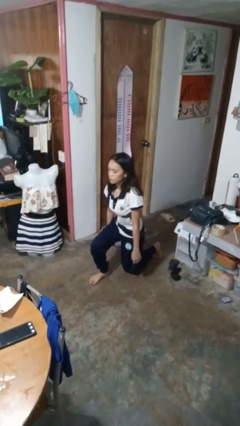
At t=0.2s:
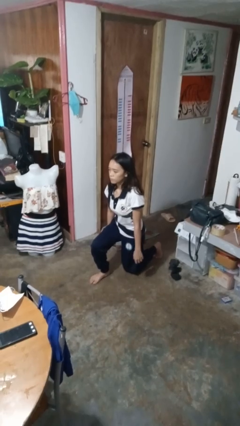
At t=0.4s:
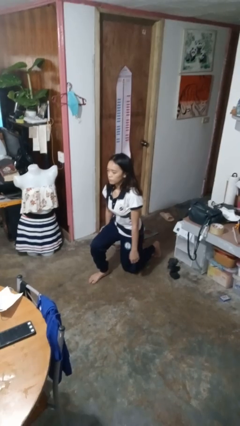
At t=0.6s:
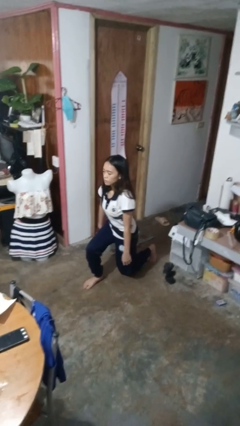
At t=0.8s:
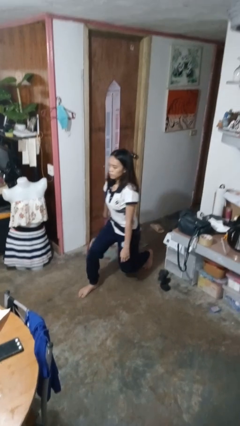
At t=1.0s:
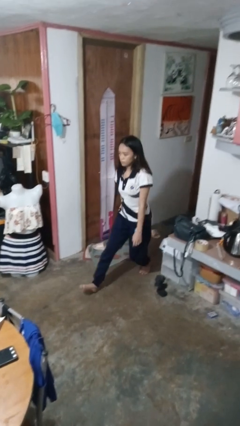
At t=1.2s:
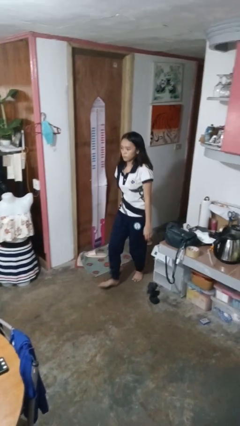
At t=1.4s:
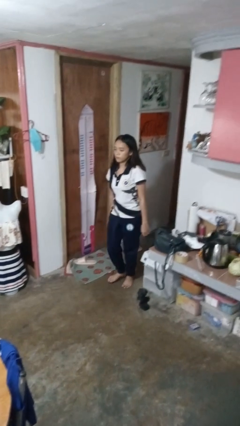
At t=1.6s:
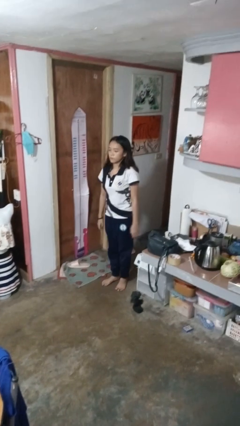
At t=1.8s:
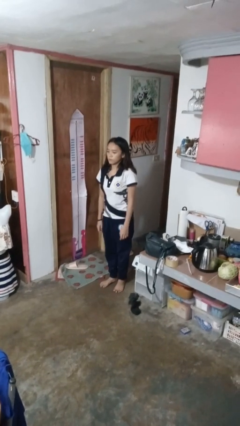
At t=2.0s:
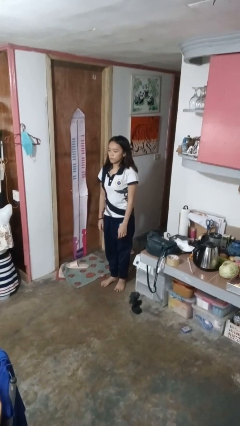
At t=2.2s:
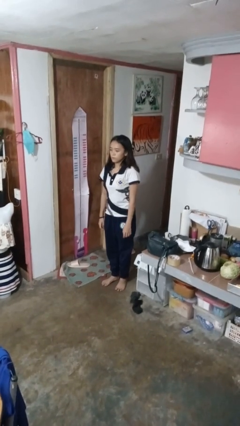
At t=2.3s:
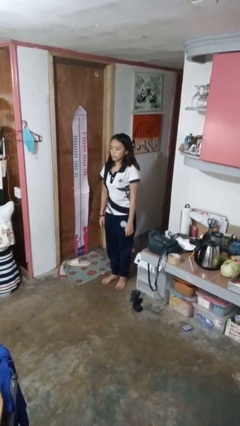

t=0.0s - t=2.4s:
person stands up from floor

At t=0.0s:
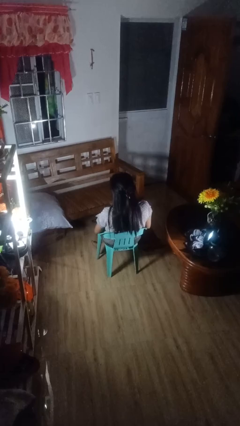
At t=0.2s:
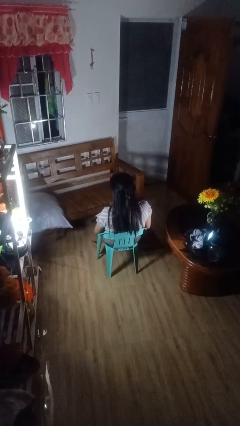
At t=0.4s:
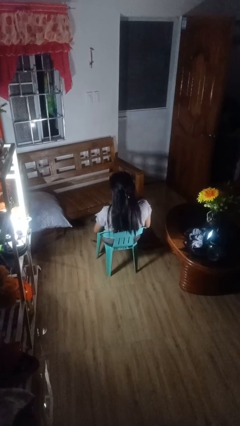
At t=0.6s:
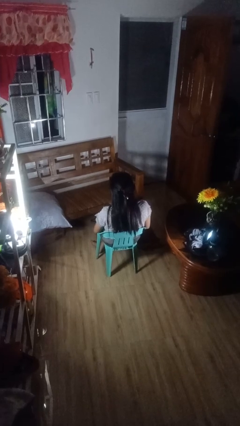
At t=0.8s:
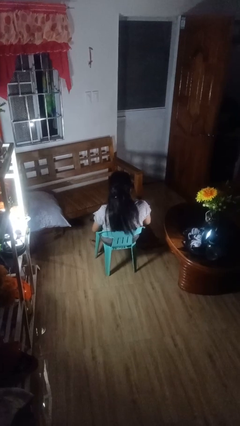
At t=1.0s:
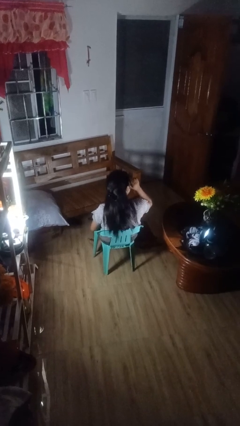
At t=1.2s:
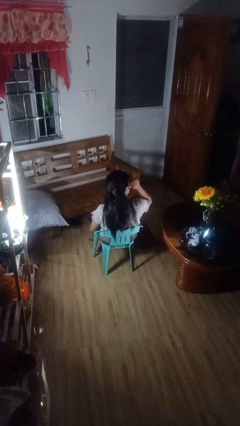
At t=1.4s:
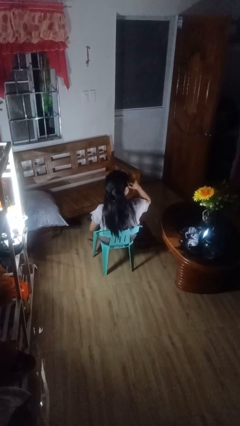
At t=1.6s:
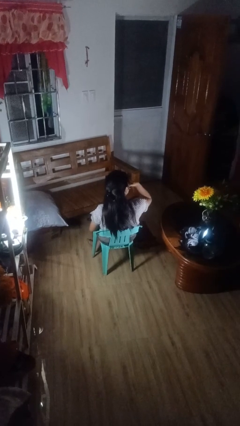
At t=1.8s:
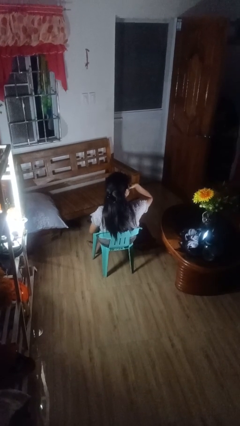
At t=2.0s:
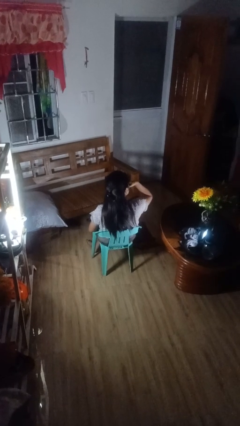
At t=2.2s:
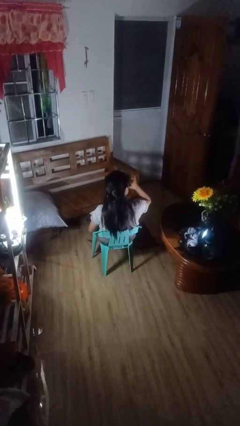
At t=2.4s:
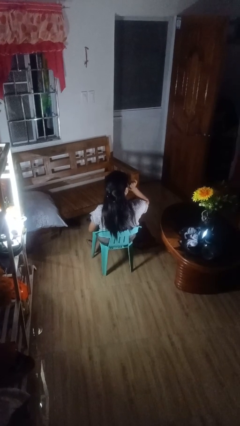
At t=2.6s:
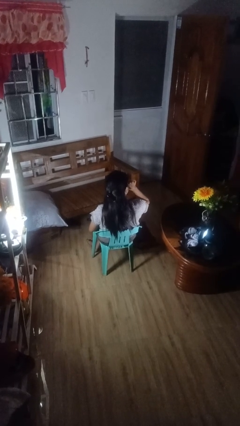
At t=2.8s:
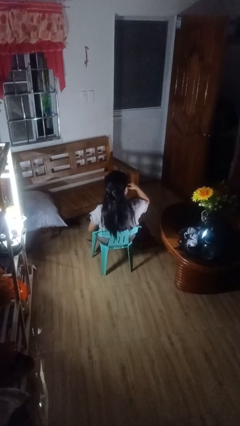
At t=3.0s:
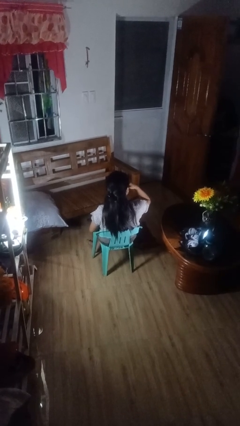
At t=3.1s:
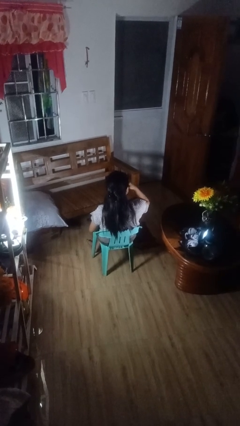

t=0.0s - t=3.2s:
person licks fingers

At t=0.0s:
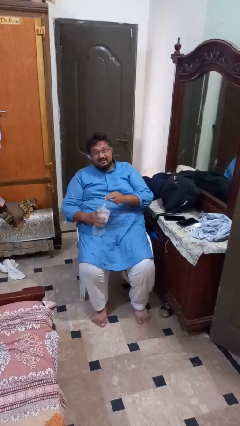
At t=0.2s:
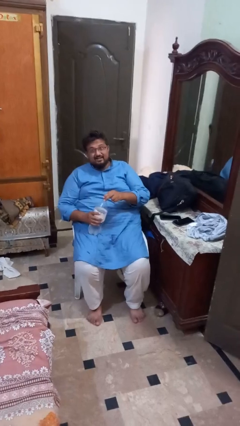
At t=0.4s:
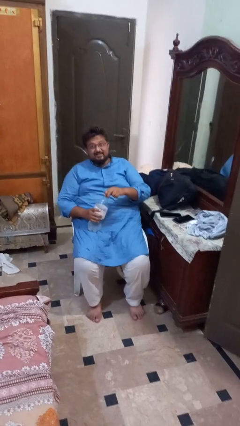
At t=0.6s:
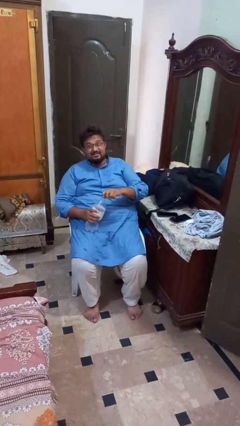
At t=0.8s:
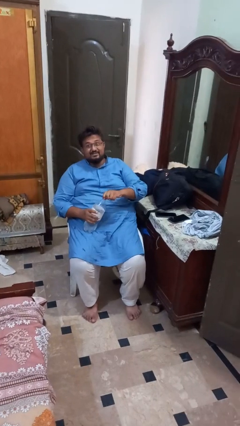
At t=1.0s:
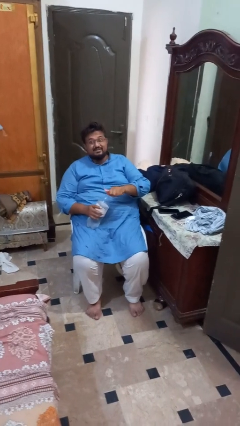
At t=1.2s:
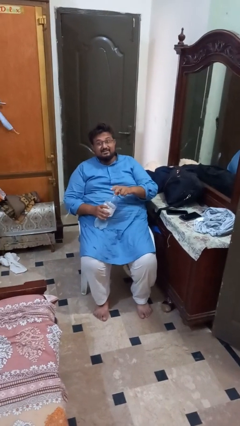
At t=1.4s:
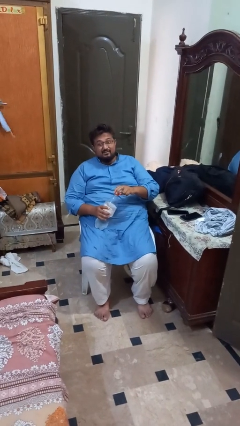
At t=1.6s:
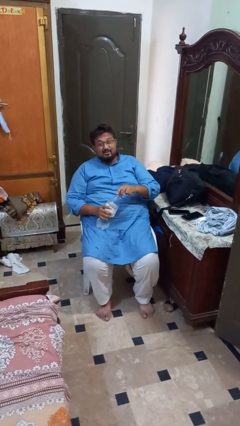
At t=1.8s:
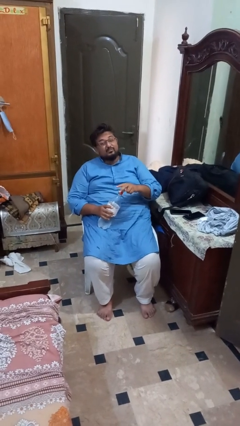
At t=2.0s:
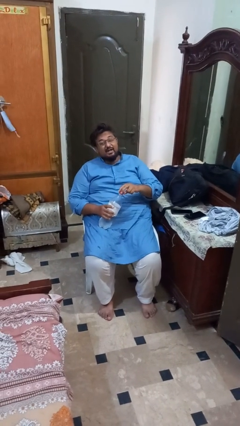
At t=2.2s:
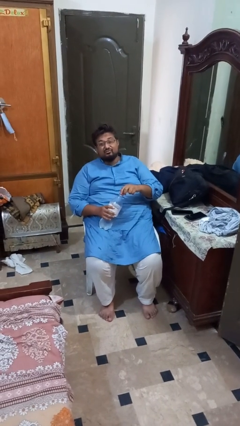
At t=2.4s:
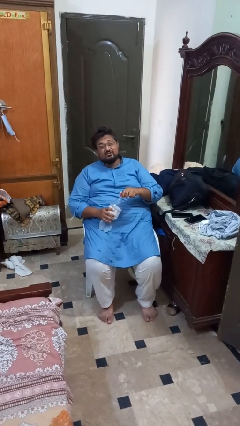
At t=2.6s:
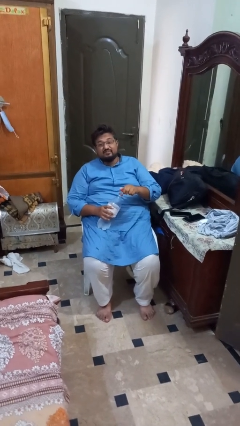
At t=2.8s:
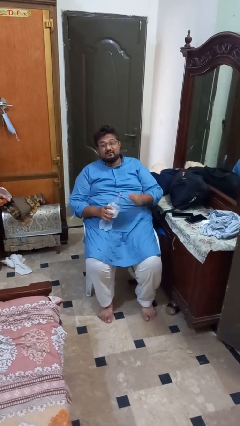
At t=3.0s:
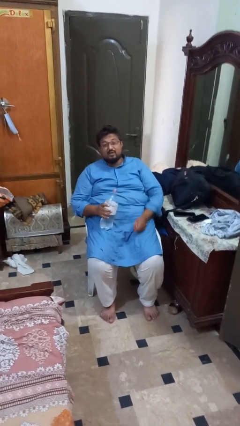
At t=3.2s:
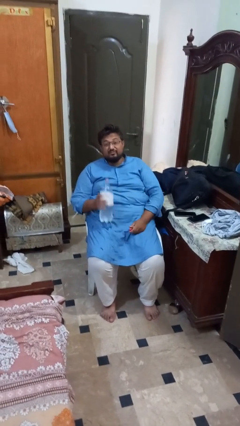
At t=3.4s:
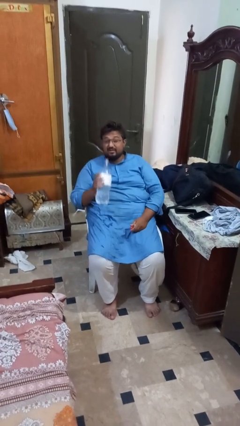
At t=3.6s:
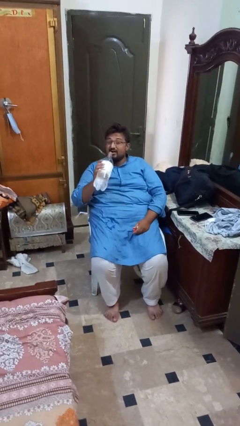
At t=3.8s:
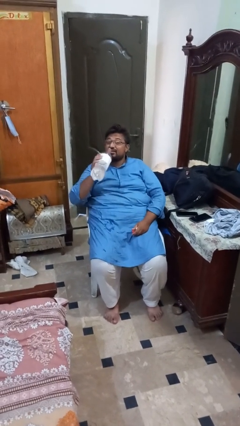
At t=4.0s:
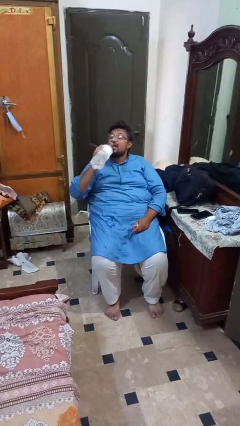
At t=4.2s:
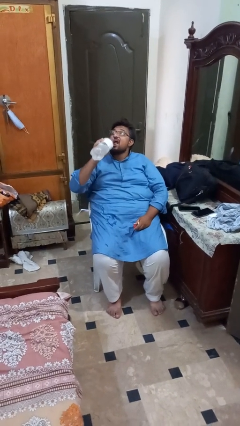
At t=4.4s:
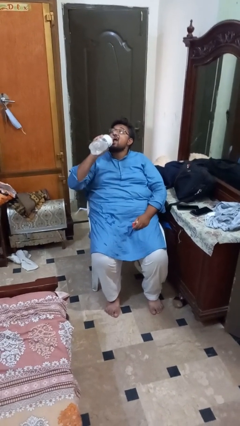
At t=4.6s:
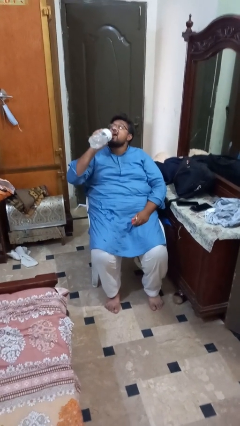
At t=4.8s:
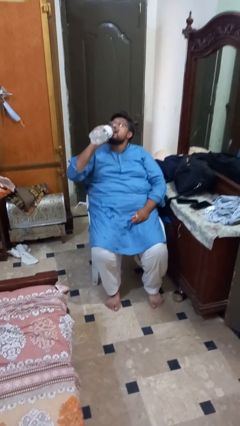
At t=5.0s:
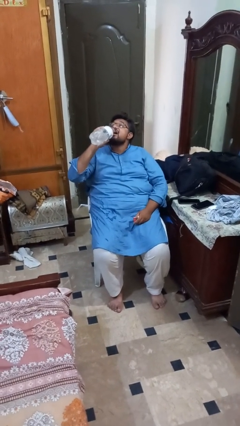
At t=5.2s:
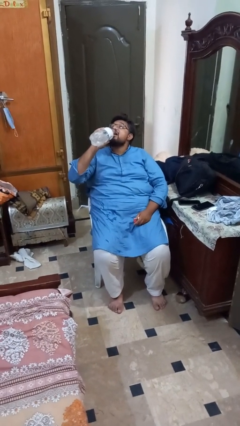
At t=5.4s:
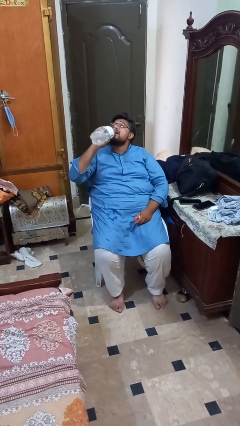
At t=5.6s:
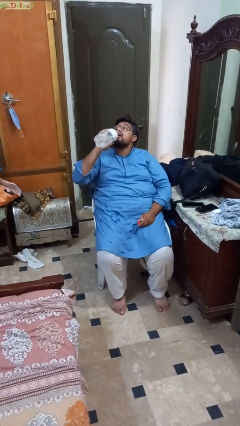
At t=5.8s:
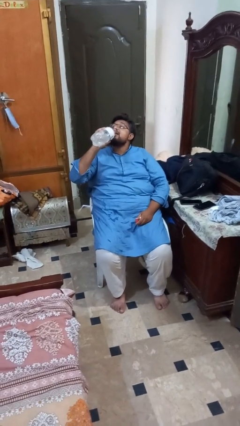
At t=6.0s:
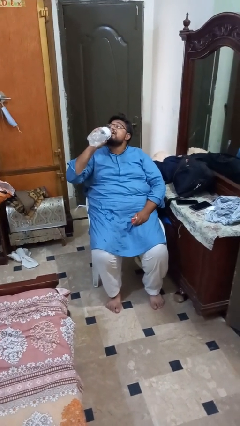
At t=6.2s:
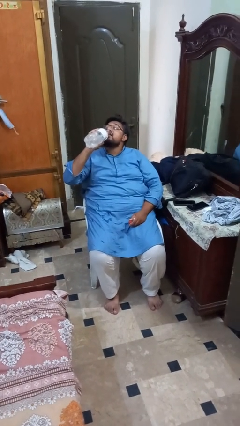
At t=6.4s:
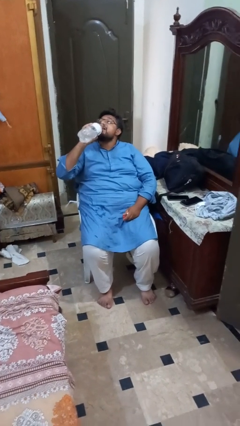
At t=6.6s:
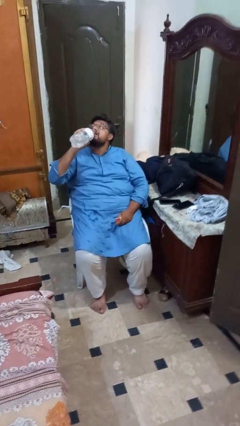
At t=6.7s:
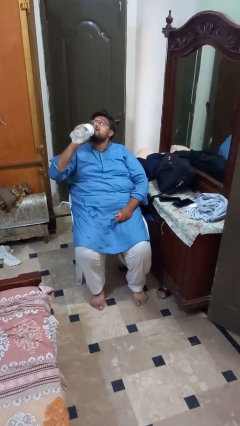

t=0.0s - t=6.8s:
person drinks from bottle

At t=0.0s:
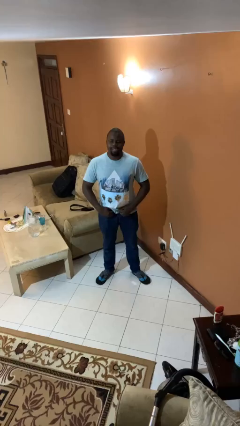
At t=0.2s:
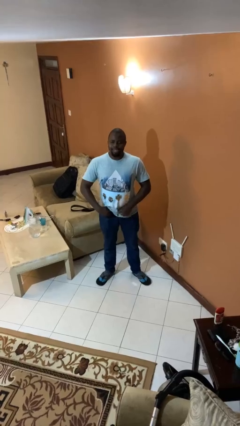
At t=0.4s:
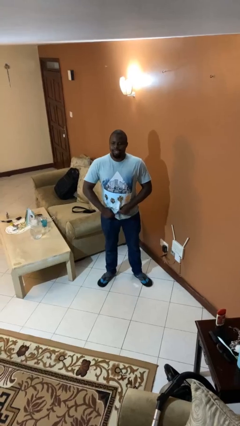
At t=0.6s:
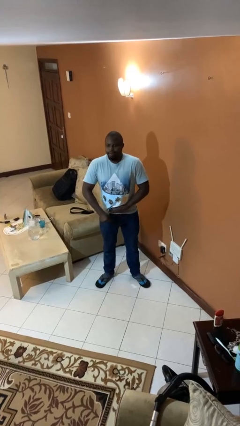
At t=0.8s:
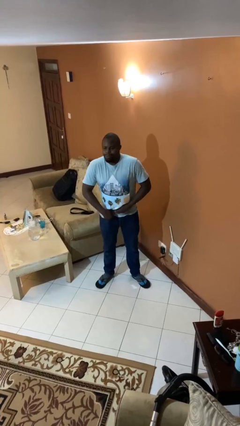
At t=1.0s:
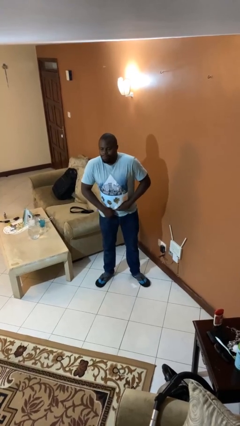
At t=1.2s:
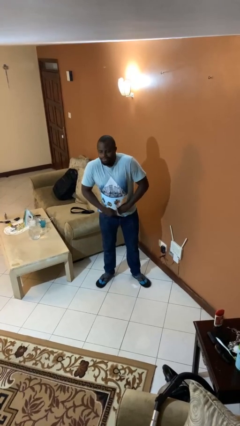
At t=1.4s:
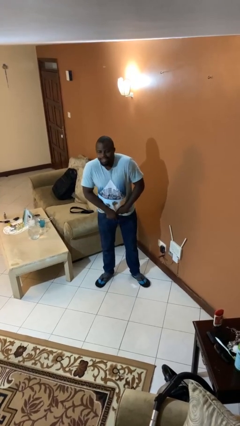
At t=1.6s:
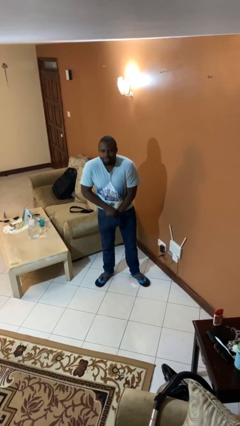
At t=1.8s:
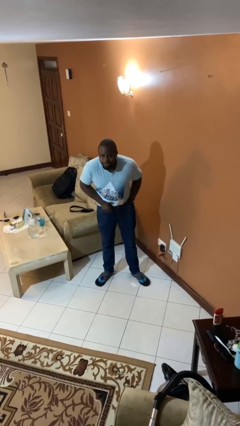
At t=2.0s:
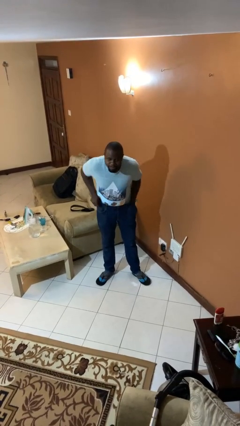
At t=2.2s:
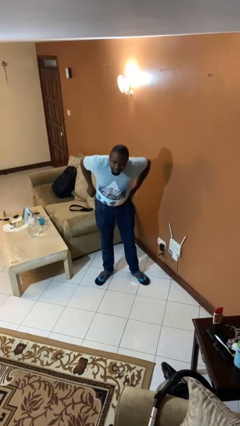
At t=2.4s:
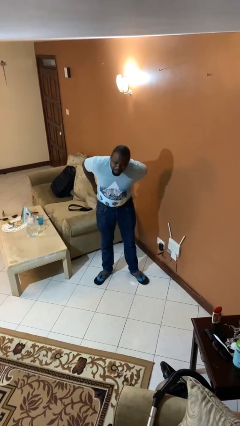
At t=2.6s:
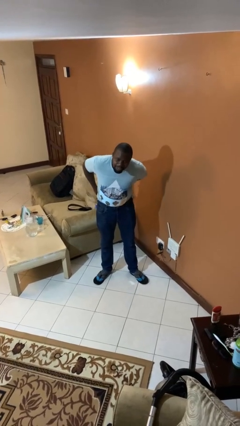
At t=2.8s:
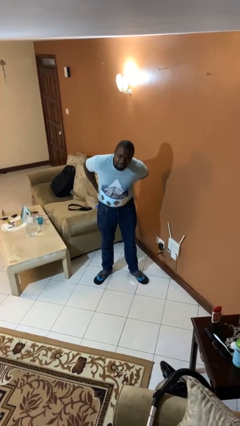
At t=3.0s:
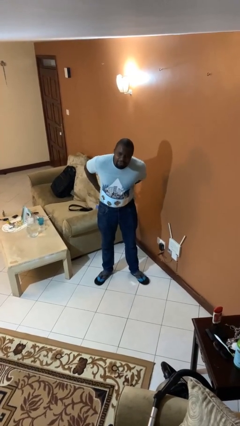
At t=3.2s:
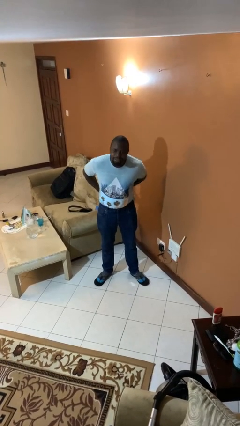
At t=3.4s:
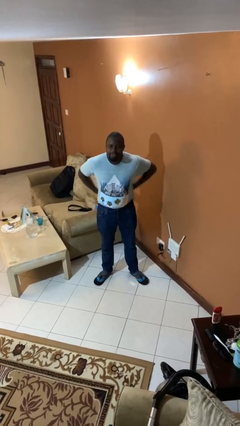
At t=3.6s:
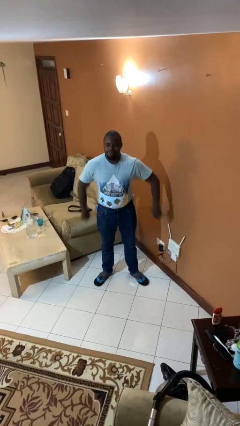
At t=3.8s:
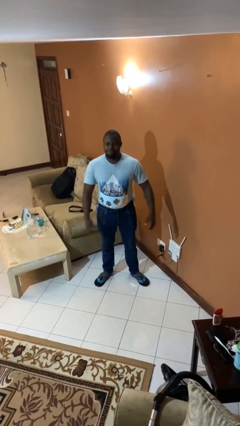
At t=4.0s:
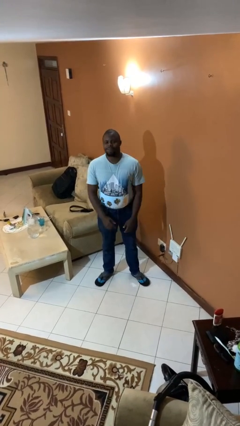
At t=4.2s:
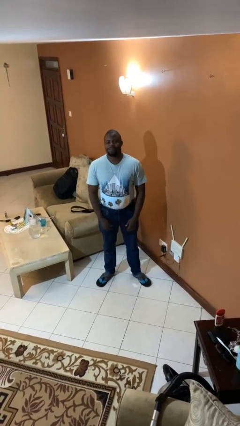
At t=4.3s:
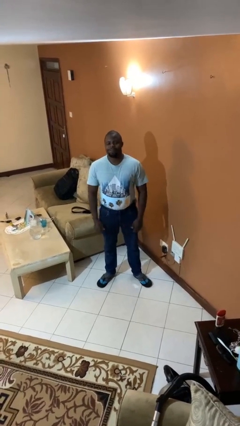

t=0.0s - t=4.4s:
person tucks in shirt

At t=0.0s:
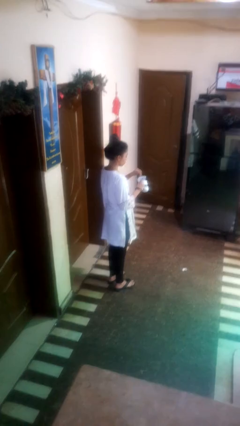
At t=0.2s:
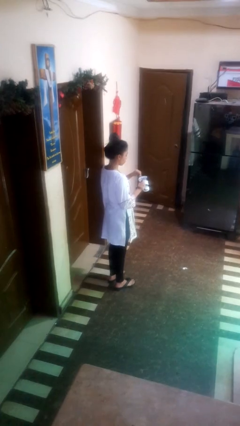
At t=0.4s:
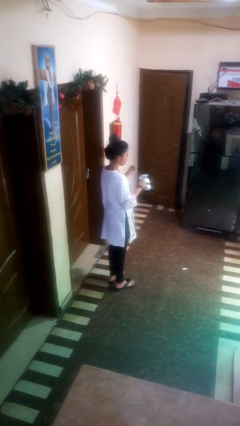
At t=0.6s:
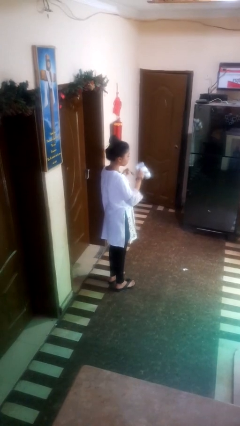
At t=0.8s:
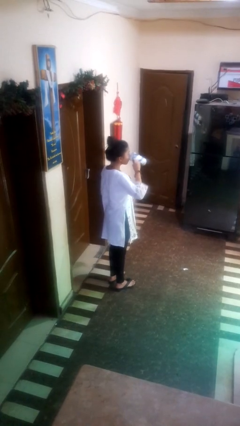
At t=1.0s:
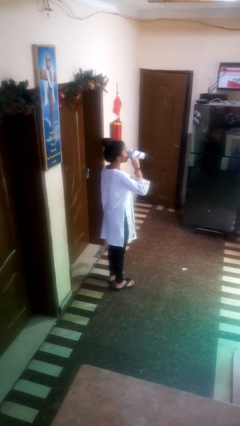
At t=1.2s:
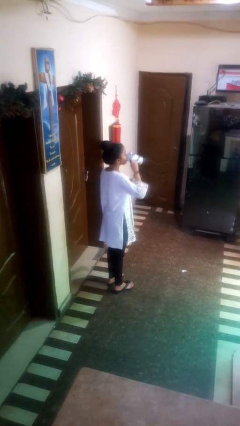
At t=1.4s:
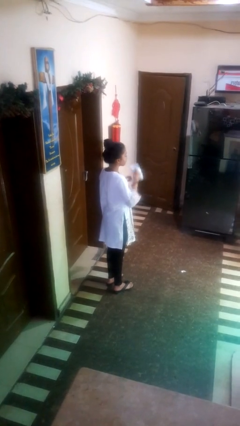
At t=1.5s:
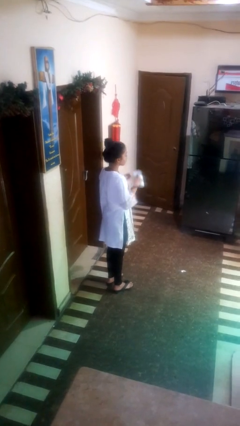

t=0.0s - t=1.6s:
person drinks from mug
